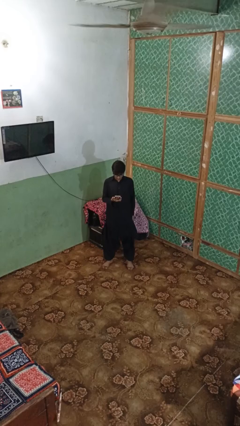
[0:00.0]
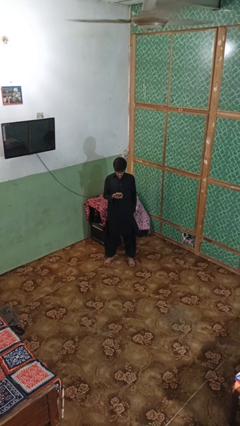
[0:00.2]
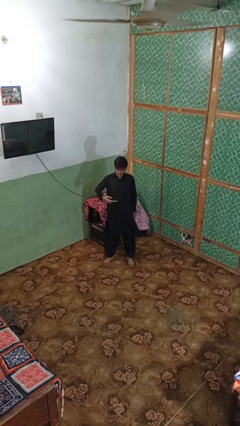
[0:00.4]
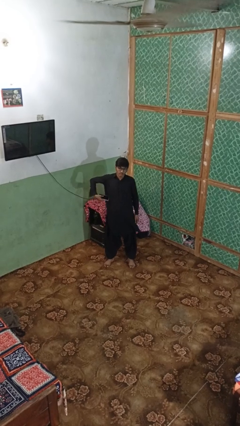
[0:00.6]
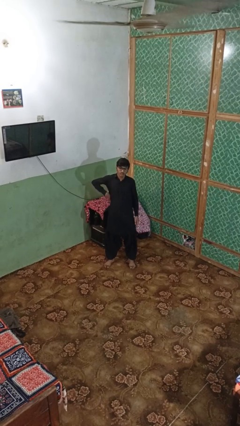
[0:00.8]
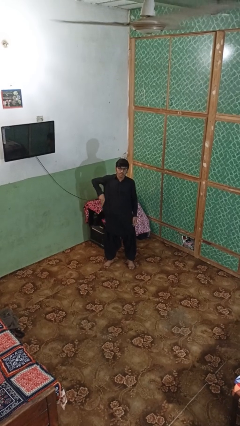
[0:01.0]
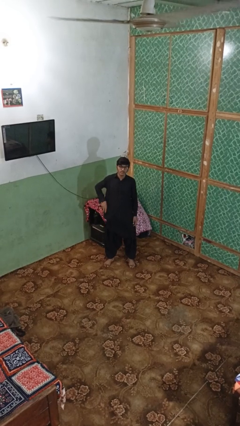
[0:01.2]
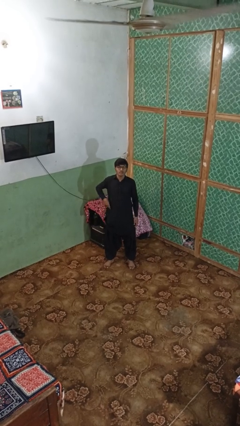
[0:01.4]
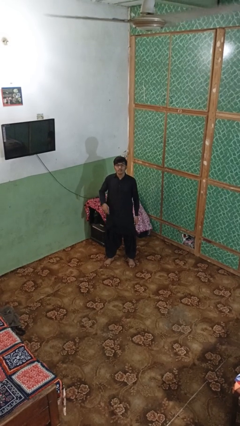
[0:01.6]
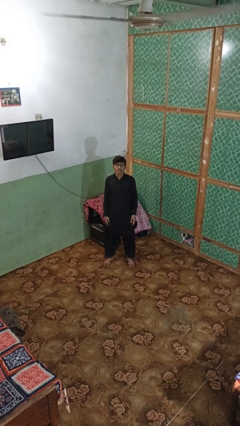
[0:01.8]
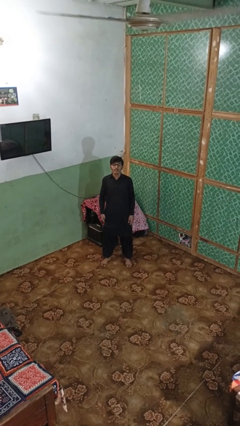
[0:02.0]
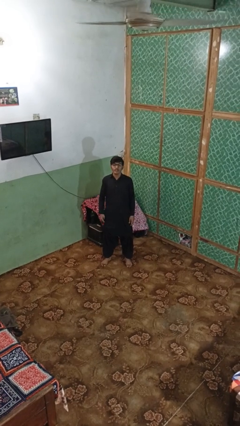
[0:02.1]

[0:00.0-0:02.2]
person puts phone into pocket

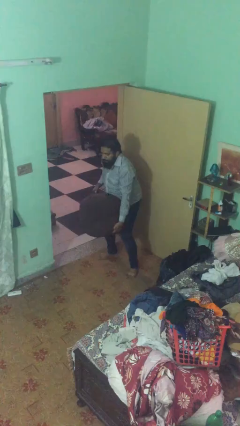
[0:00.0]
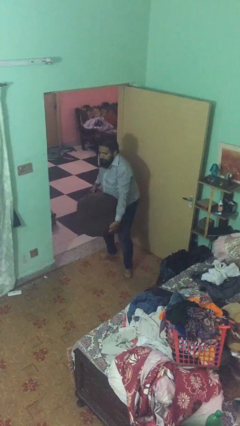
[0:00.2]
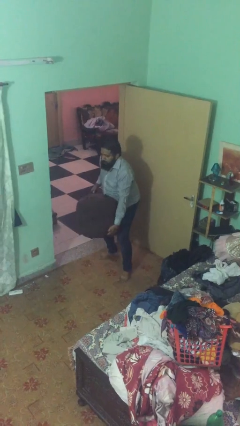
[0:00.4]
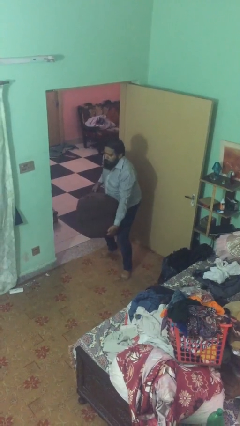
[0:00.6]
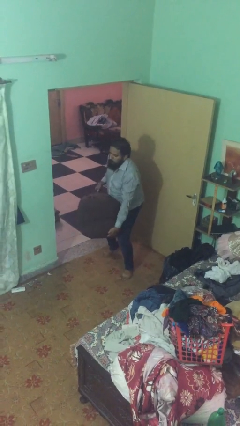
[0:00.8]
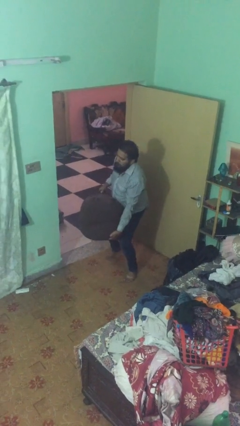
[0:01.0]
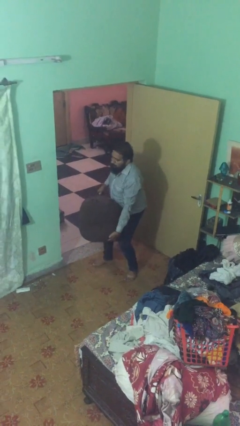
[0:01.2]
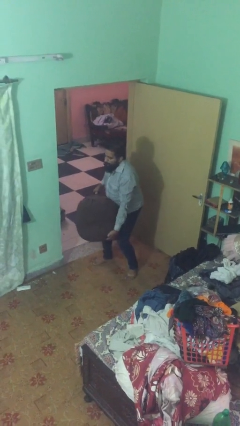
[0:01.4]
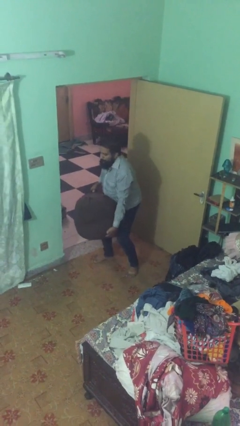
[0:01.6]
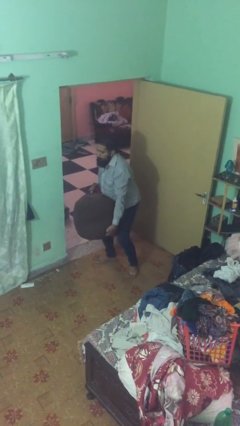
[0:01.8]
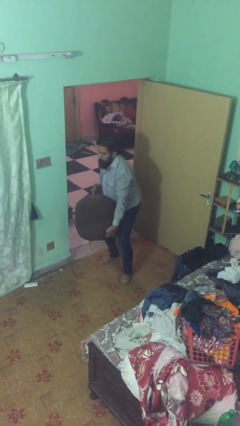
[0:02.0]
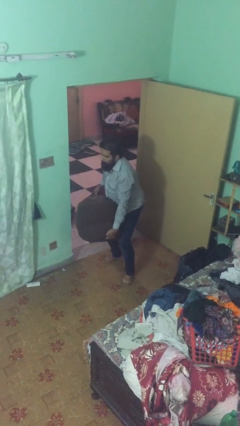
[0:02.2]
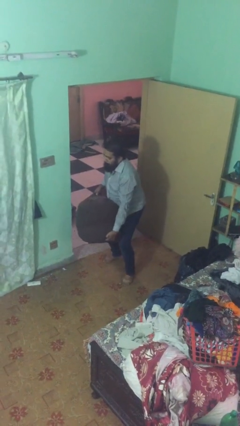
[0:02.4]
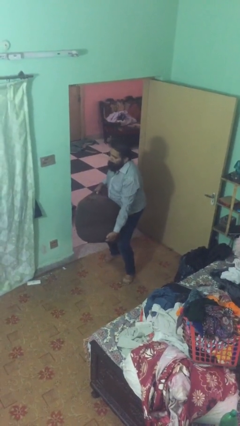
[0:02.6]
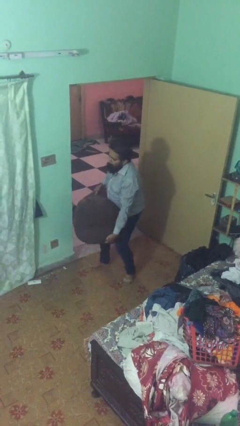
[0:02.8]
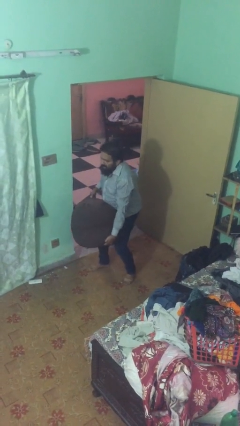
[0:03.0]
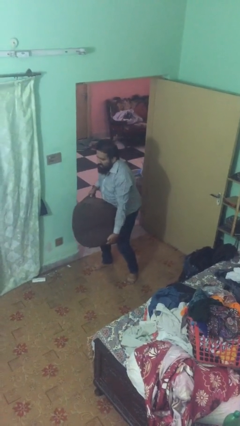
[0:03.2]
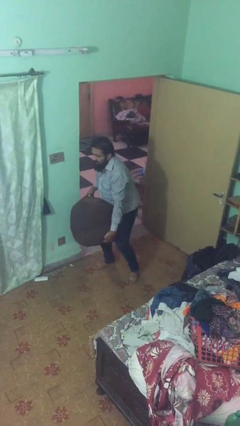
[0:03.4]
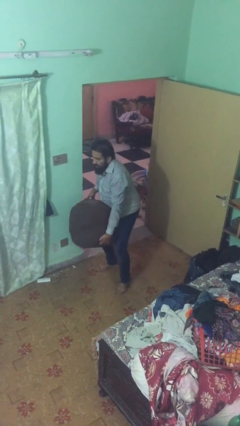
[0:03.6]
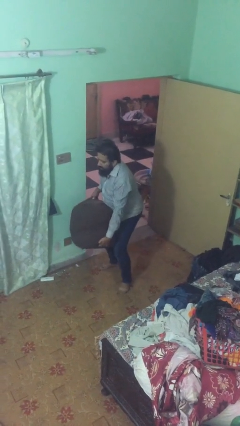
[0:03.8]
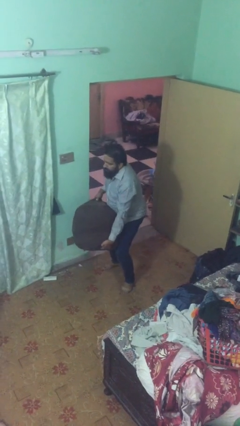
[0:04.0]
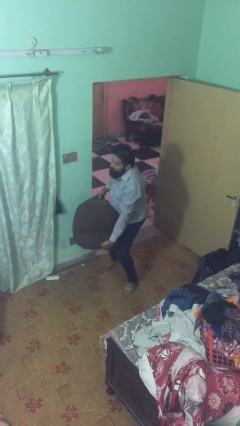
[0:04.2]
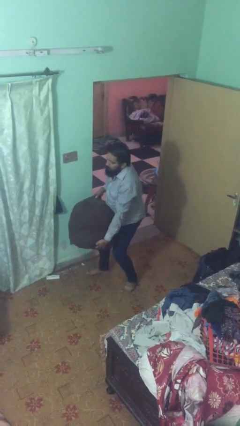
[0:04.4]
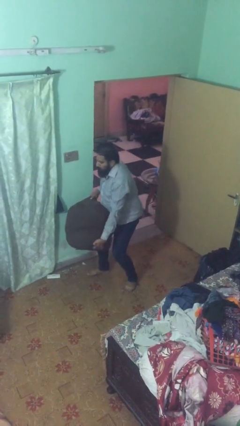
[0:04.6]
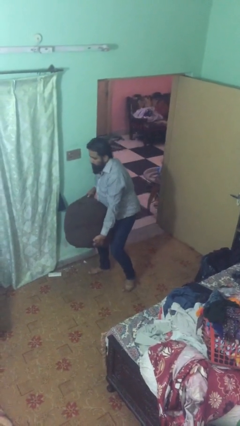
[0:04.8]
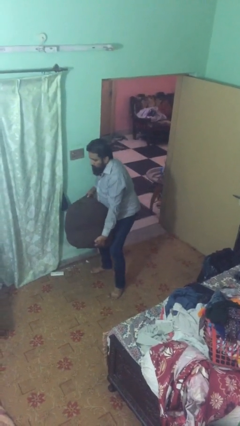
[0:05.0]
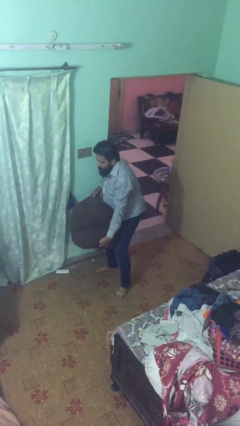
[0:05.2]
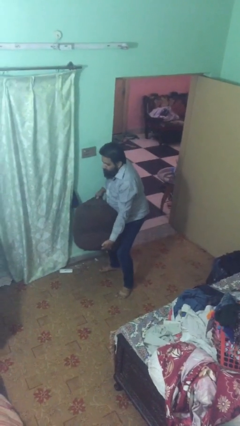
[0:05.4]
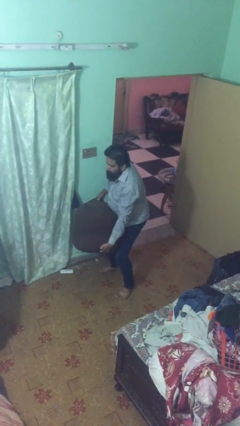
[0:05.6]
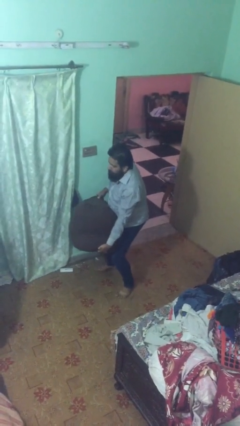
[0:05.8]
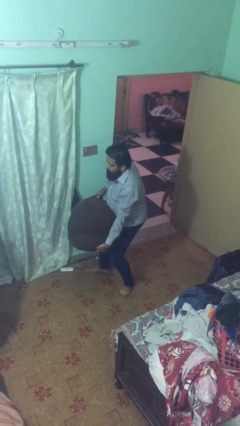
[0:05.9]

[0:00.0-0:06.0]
person carries heavy object

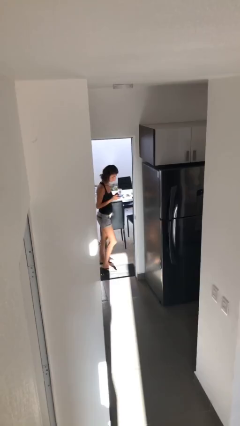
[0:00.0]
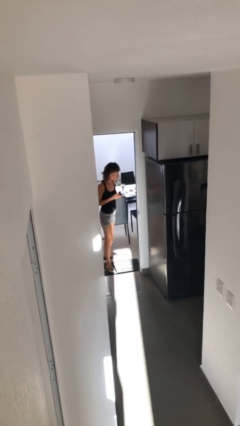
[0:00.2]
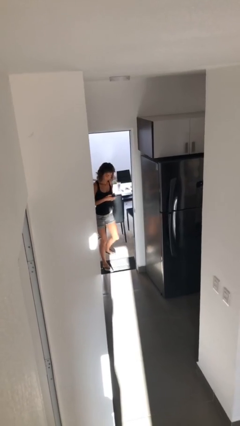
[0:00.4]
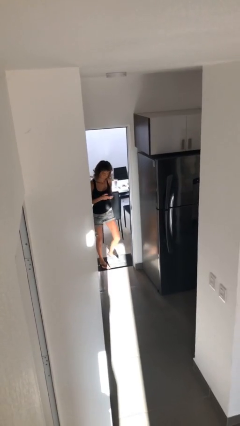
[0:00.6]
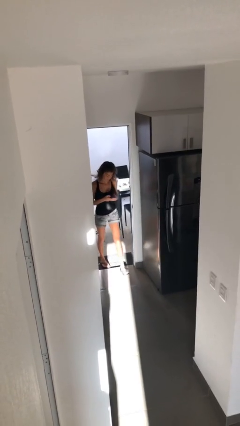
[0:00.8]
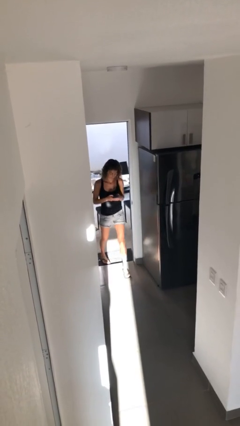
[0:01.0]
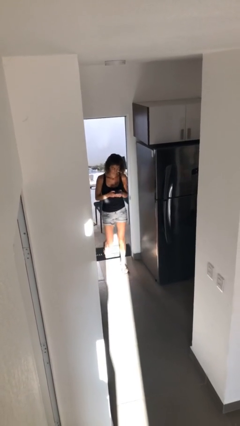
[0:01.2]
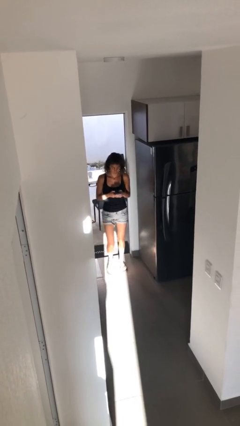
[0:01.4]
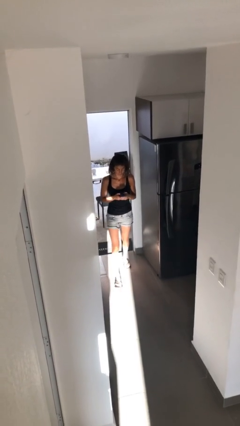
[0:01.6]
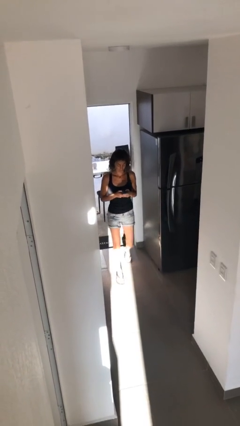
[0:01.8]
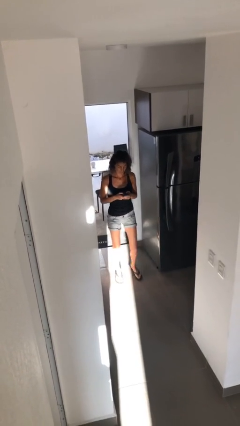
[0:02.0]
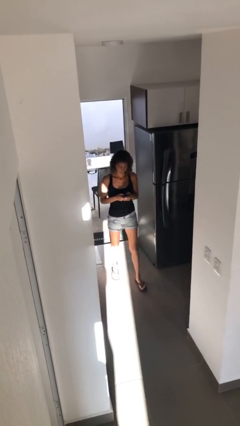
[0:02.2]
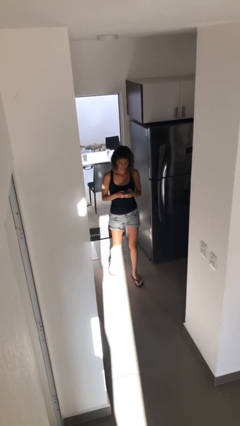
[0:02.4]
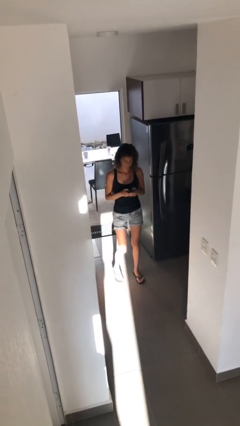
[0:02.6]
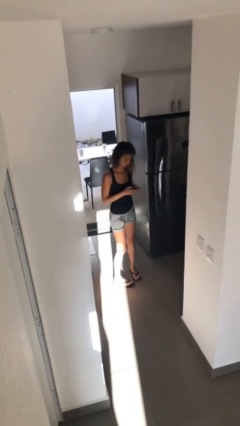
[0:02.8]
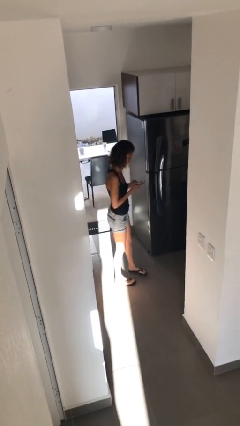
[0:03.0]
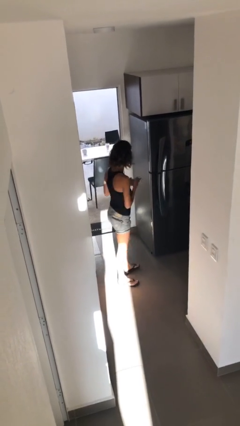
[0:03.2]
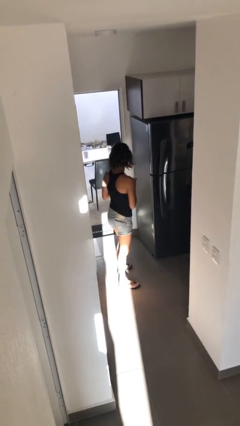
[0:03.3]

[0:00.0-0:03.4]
person enters scene through structure

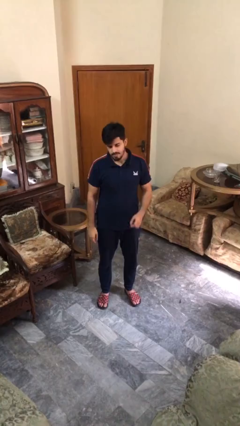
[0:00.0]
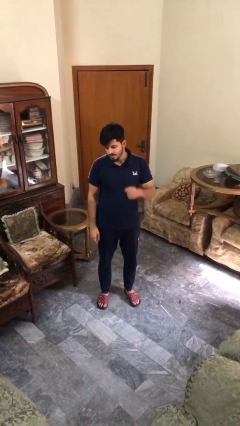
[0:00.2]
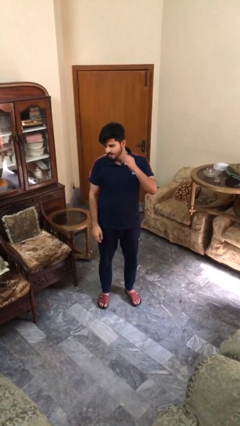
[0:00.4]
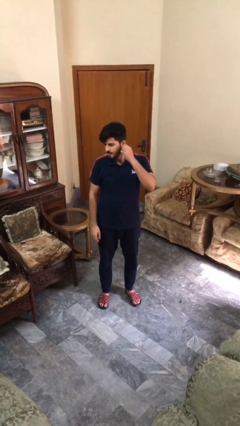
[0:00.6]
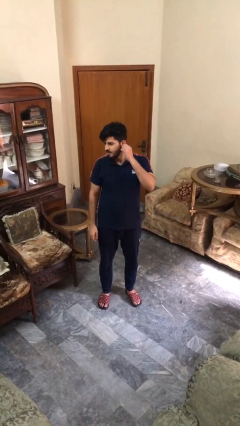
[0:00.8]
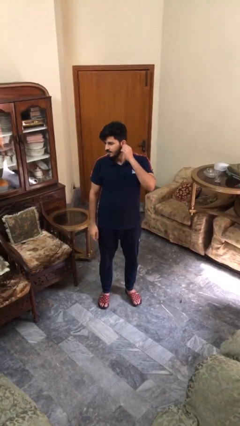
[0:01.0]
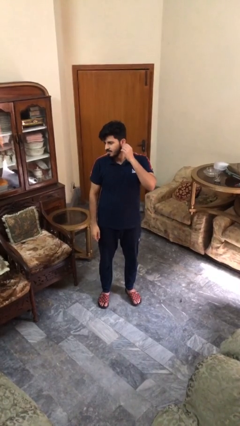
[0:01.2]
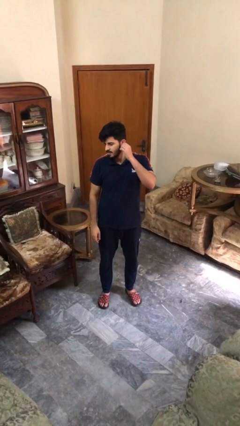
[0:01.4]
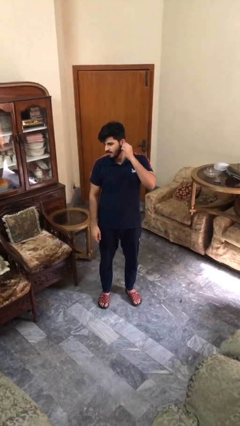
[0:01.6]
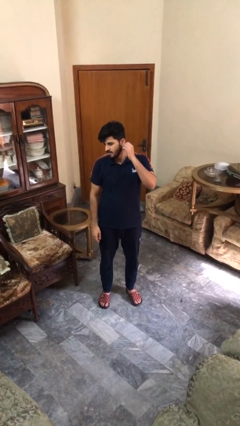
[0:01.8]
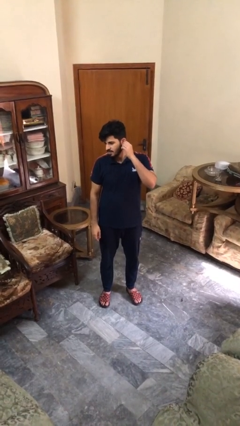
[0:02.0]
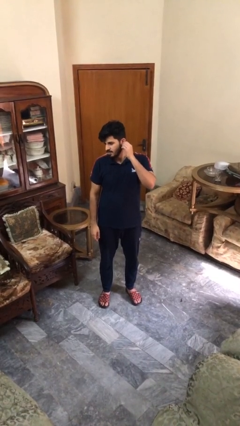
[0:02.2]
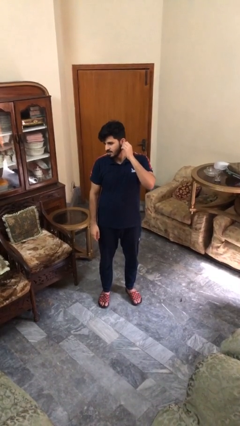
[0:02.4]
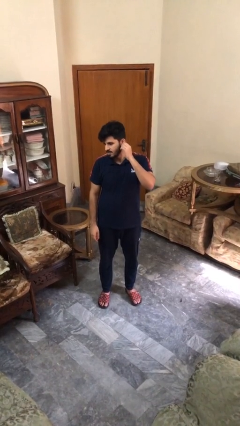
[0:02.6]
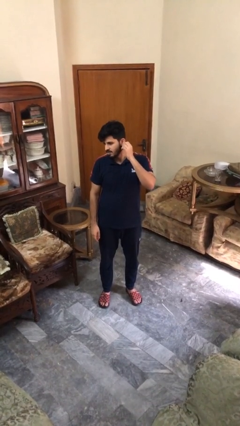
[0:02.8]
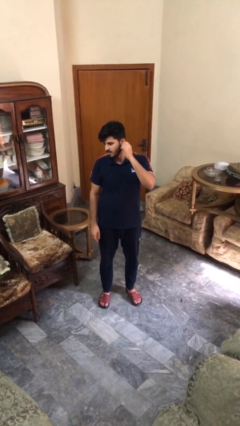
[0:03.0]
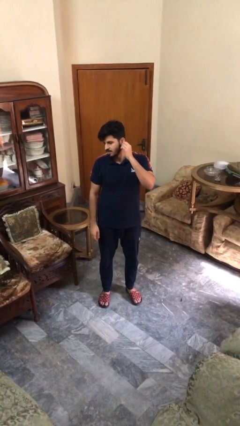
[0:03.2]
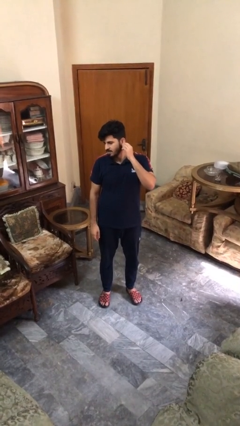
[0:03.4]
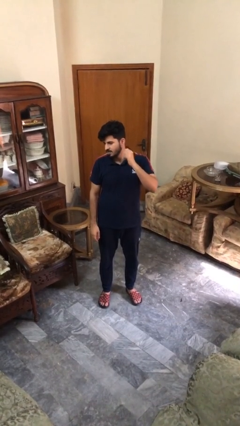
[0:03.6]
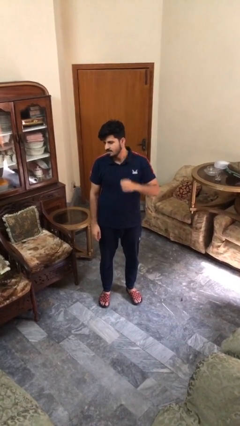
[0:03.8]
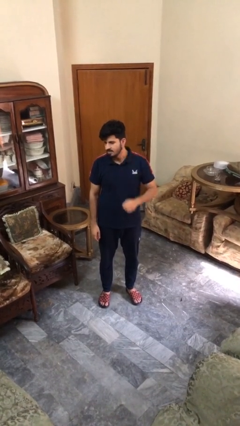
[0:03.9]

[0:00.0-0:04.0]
person touches earlobe

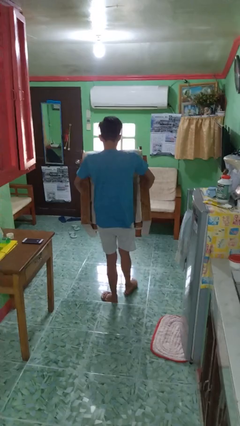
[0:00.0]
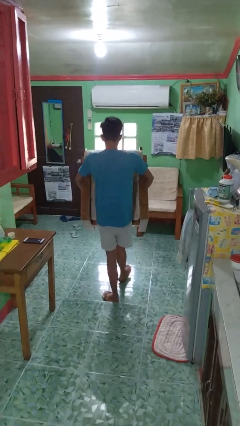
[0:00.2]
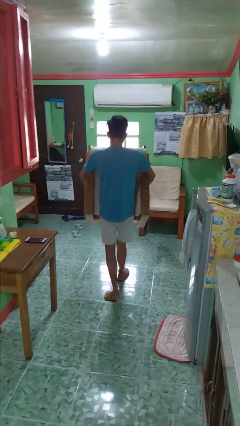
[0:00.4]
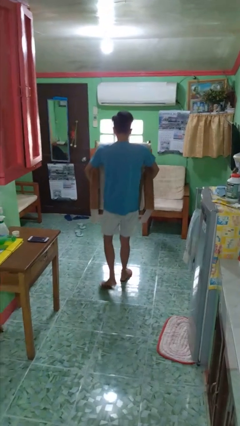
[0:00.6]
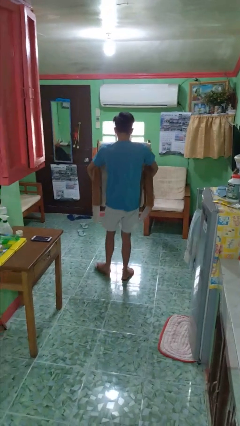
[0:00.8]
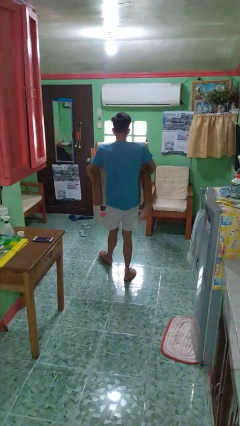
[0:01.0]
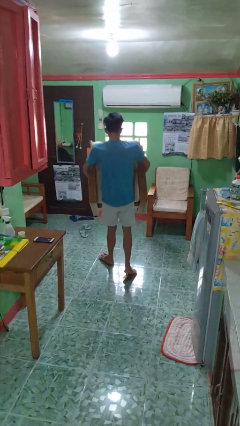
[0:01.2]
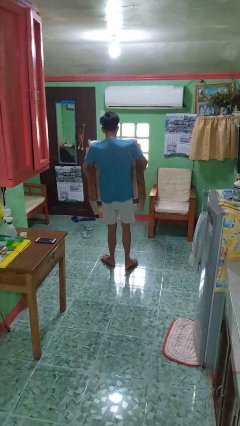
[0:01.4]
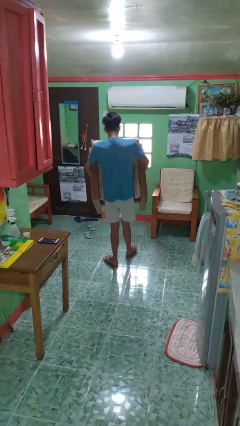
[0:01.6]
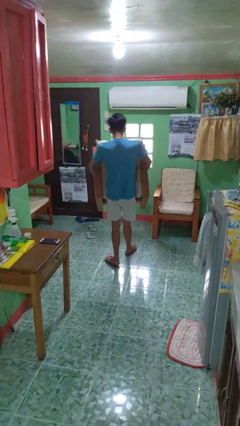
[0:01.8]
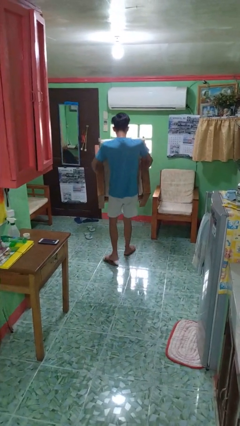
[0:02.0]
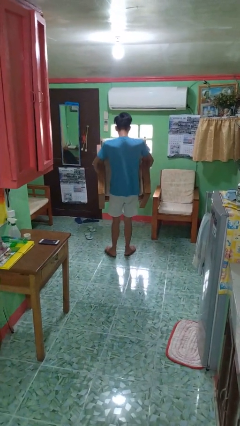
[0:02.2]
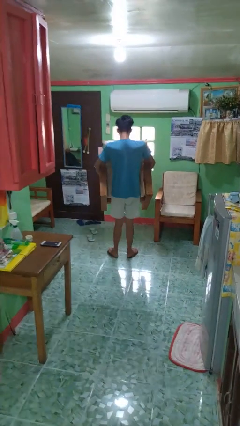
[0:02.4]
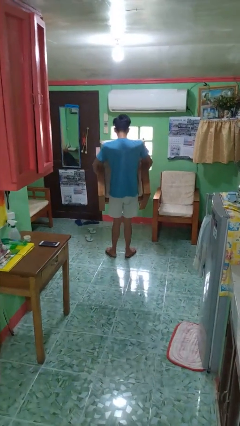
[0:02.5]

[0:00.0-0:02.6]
person carries furniture
